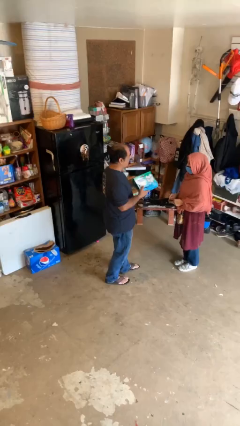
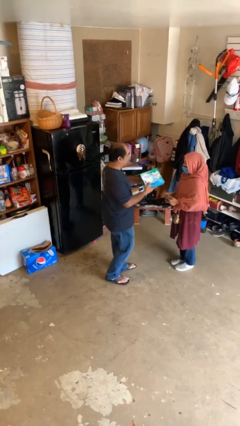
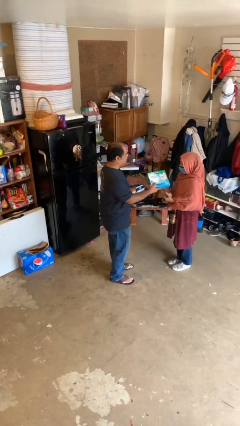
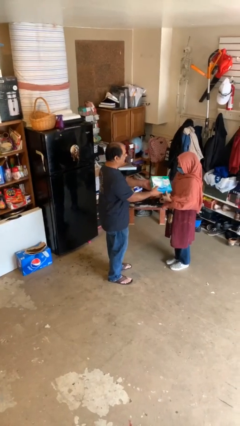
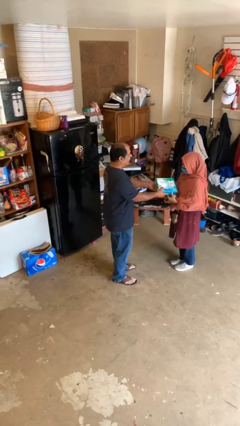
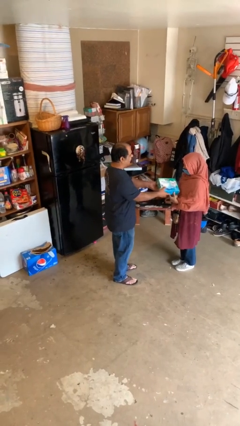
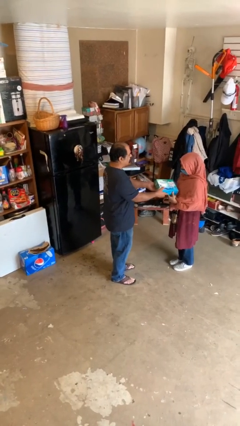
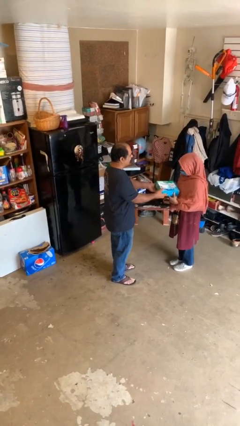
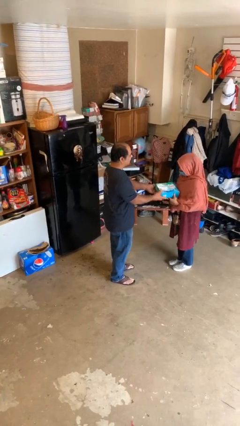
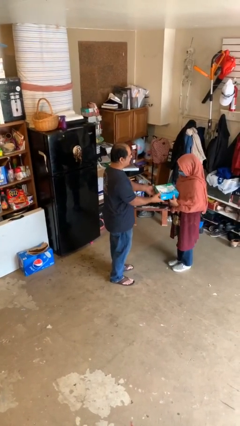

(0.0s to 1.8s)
person transfers object to person

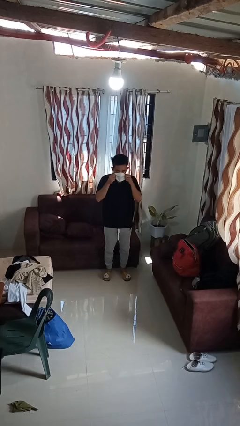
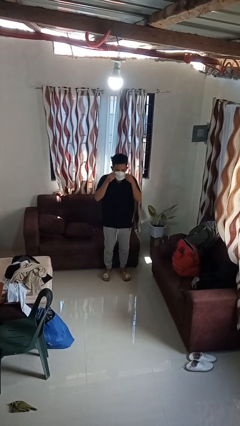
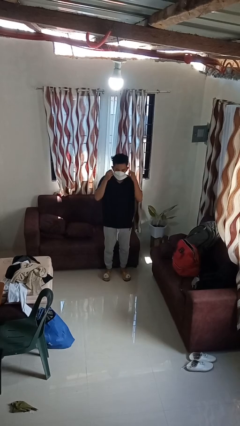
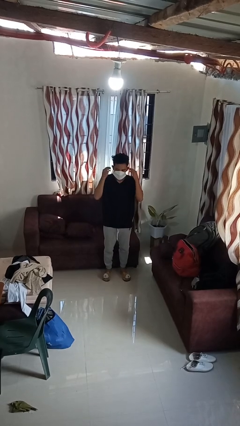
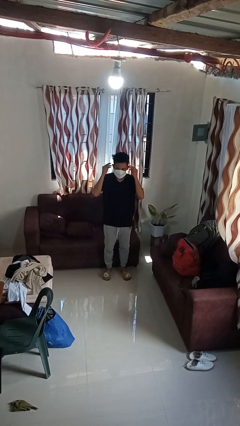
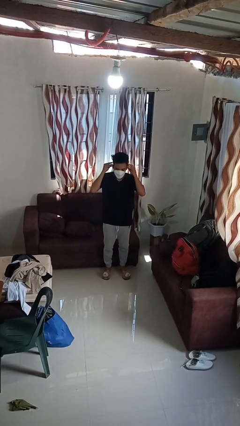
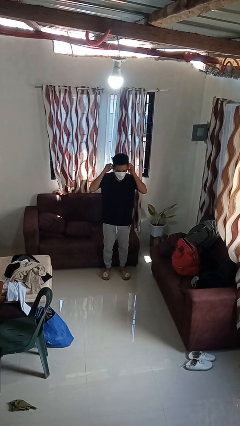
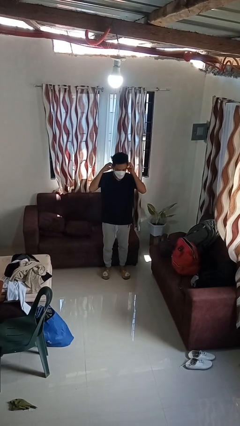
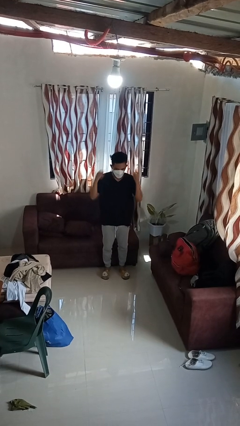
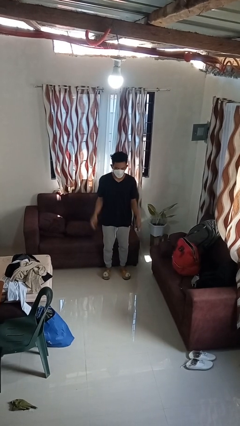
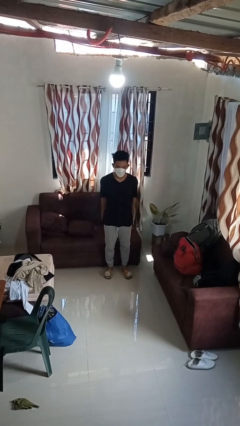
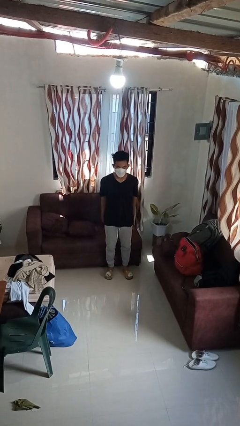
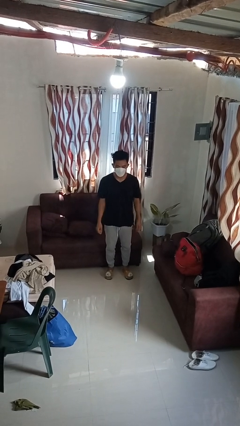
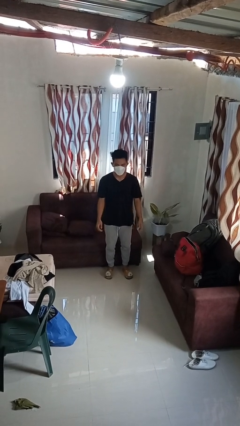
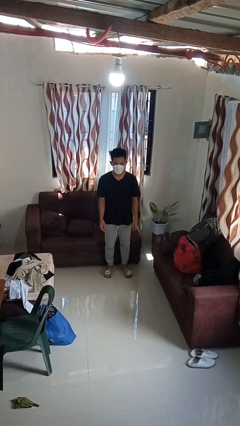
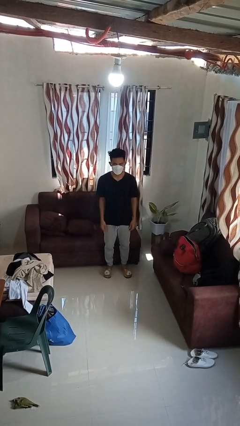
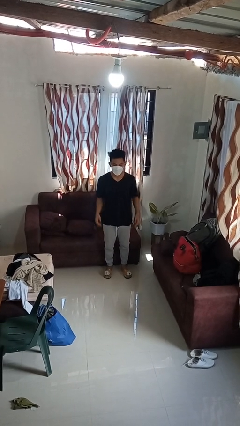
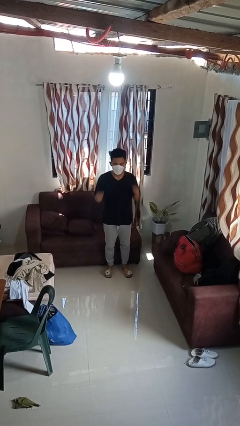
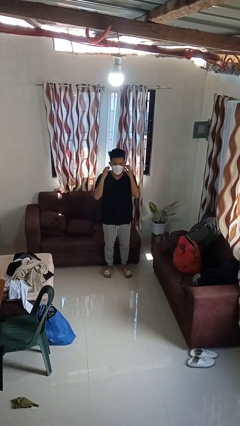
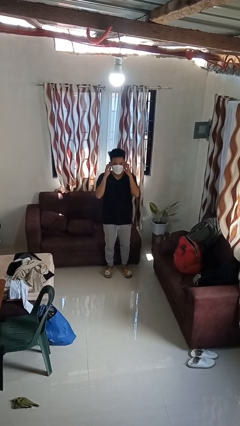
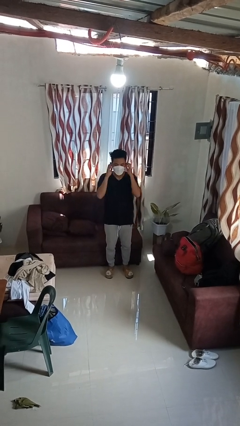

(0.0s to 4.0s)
person puts on facemask

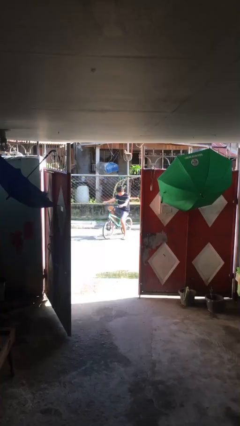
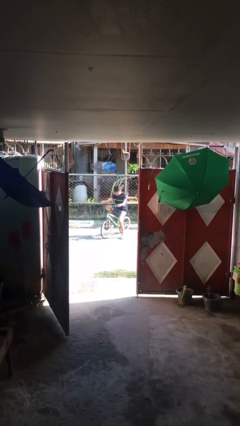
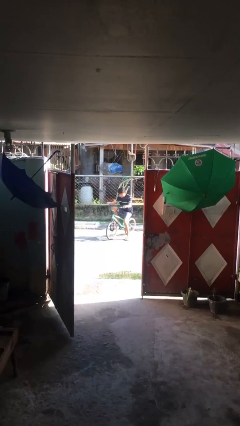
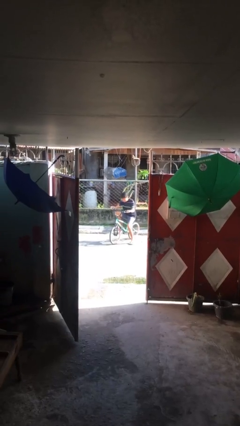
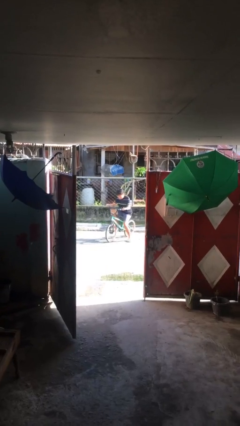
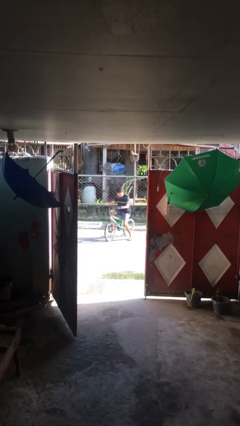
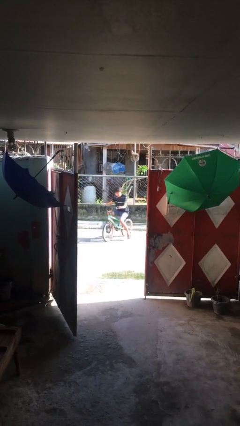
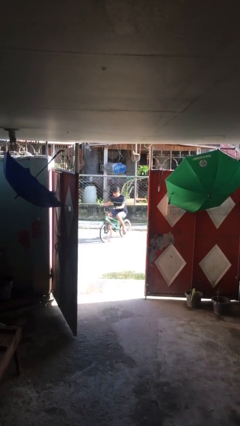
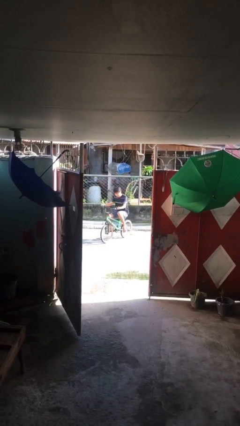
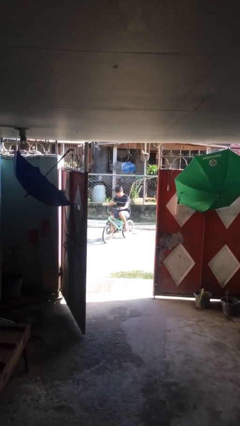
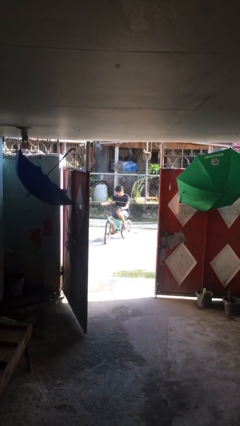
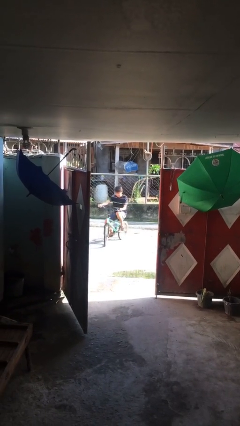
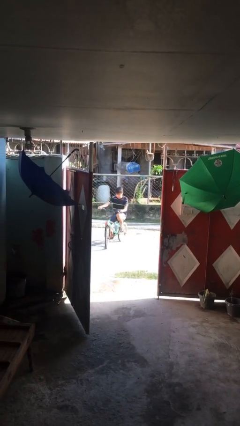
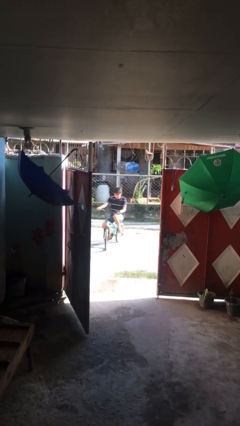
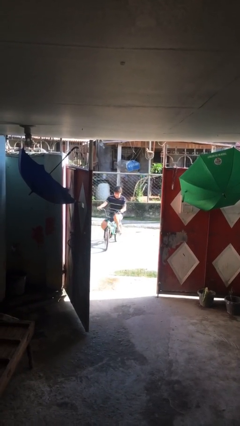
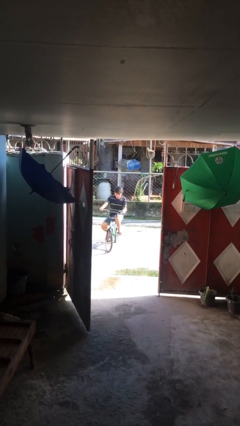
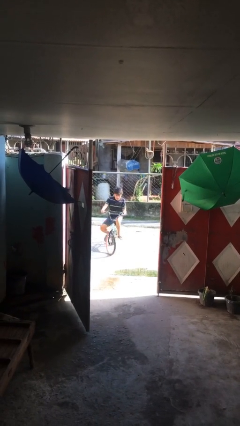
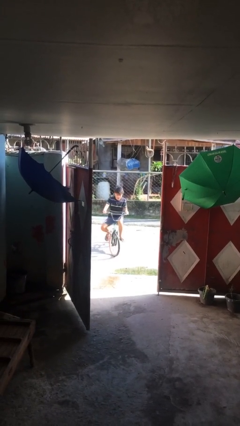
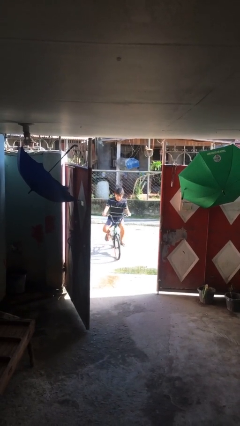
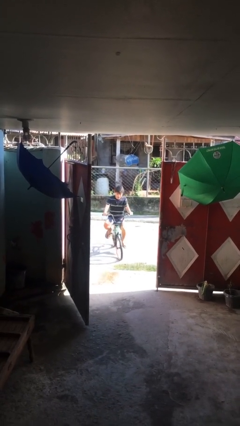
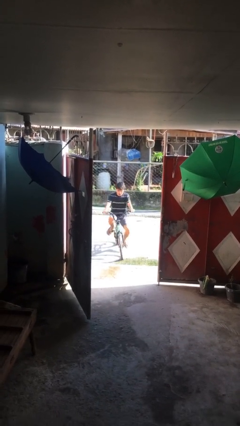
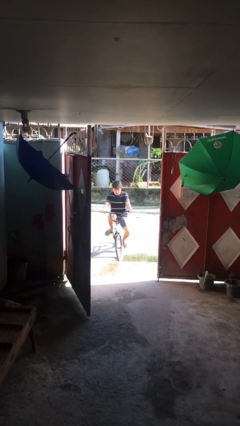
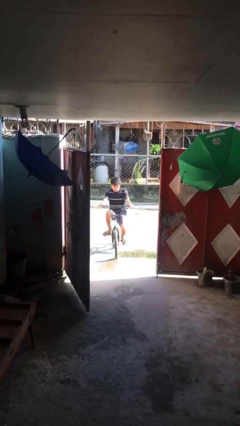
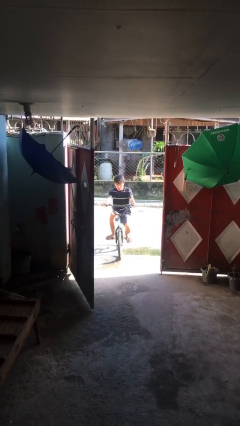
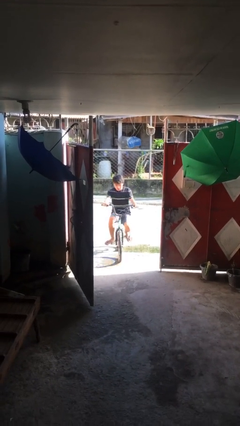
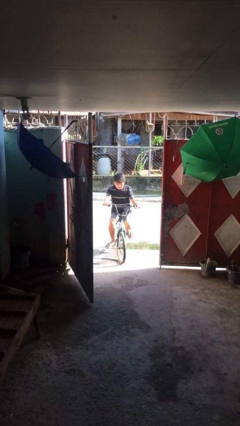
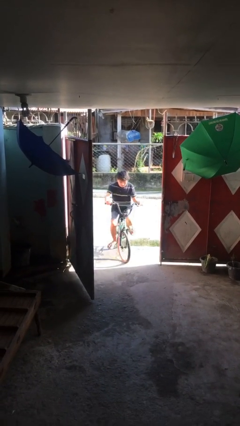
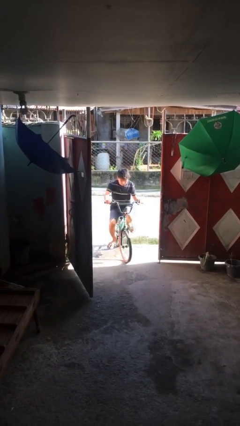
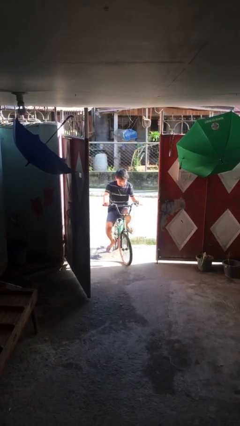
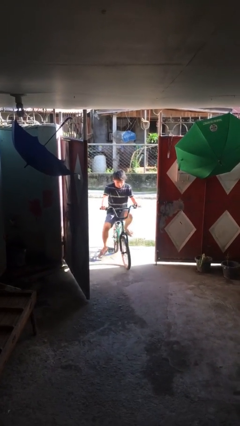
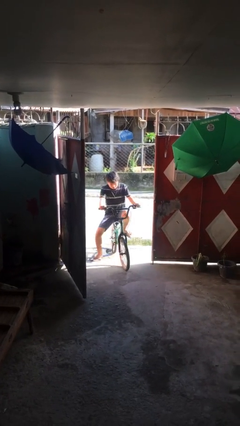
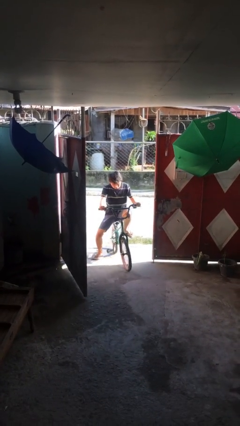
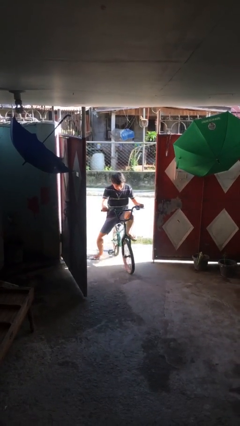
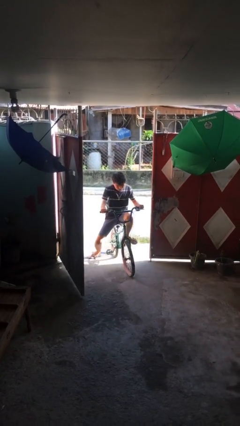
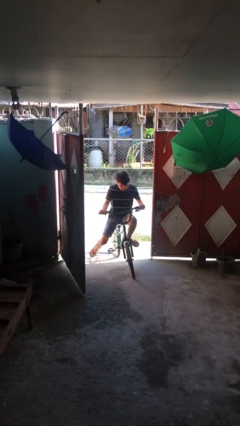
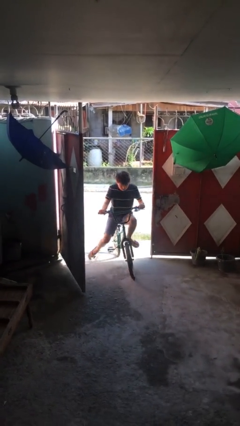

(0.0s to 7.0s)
person rides bicycle

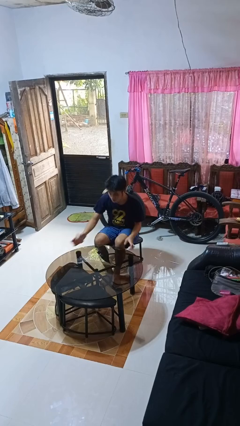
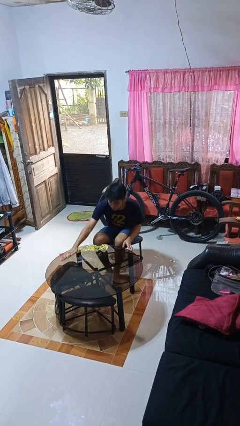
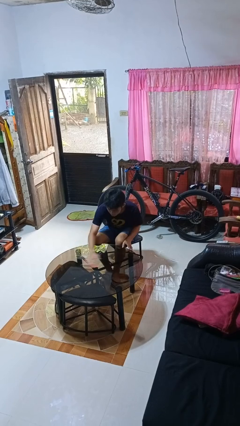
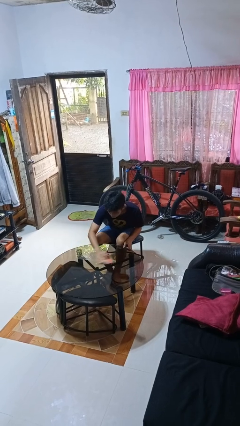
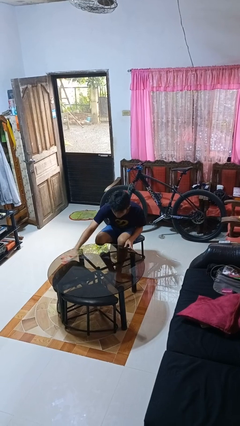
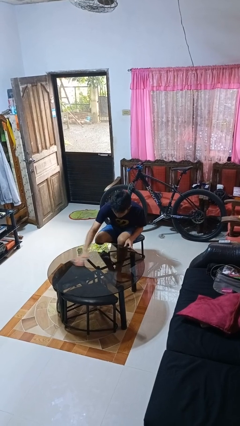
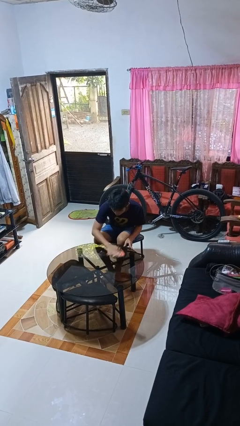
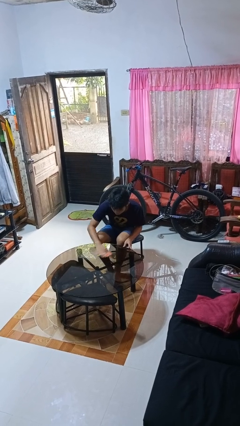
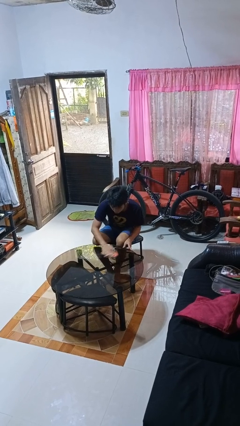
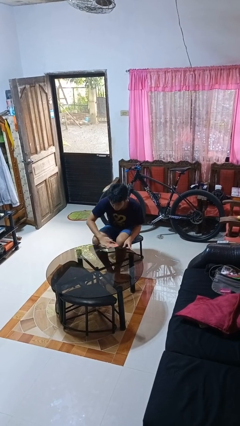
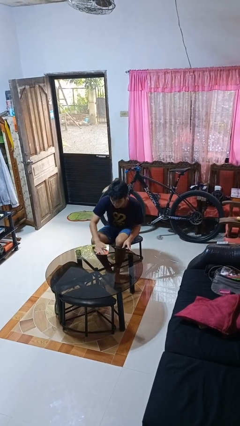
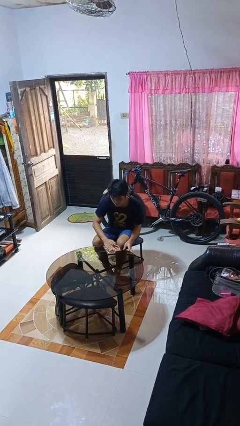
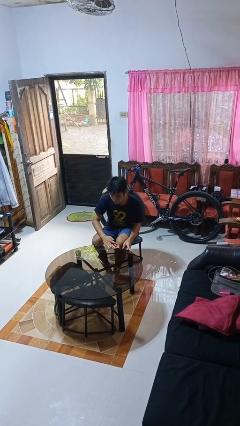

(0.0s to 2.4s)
person cleans table with rag

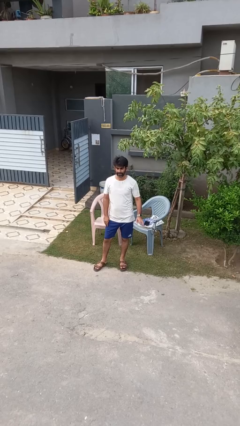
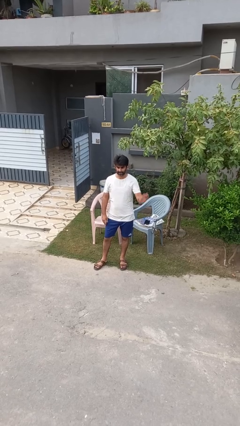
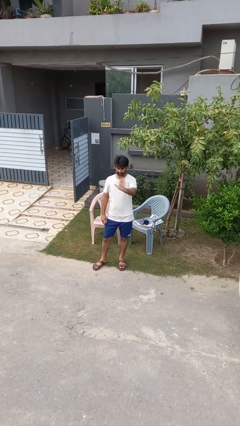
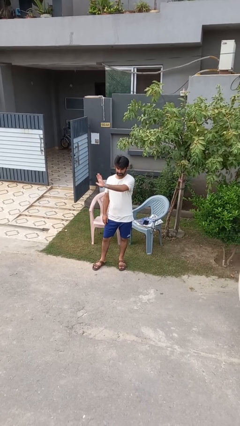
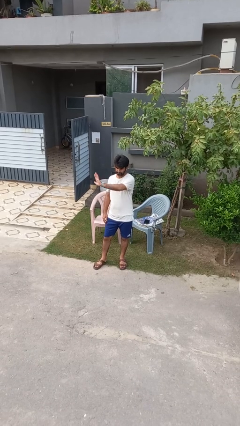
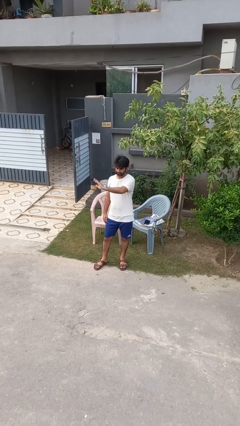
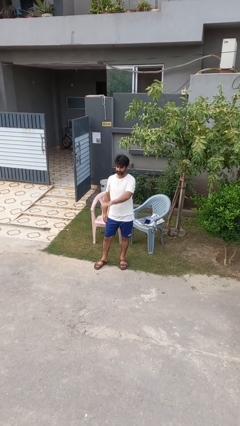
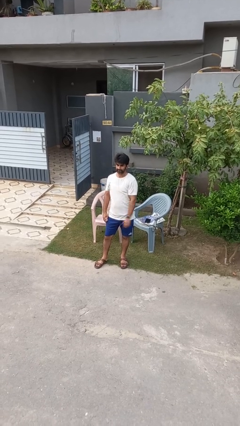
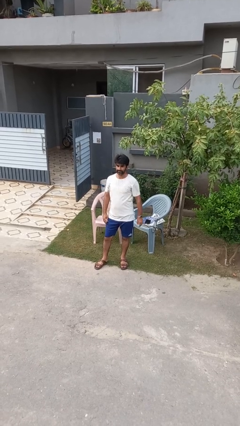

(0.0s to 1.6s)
person gestures swipe right

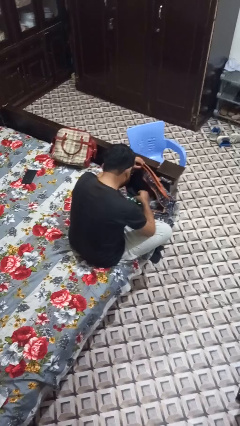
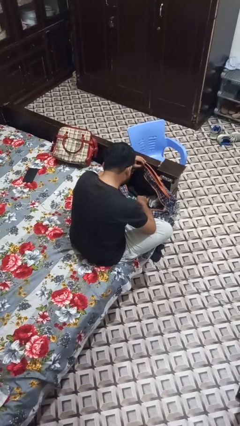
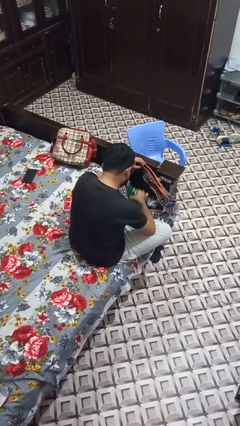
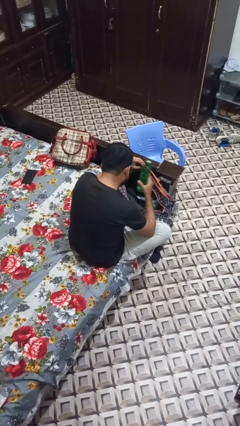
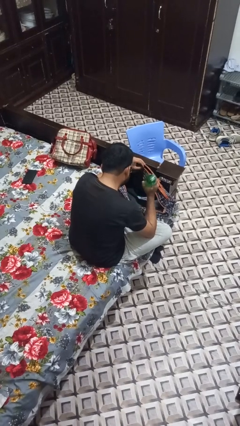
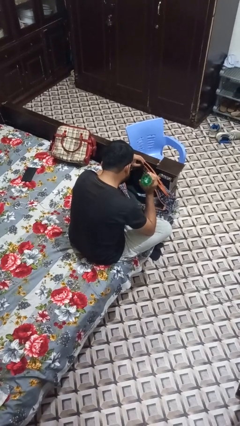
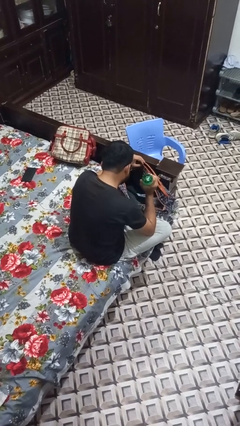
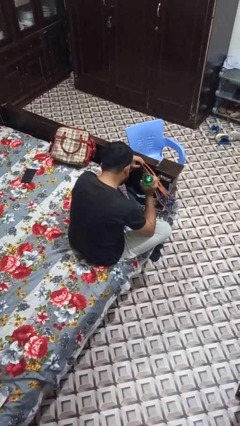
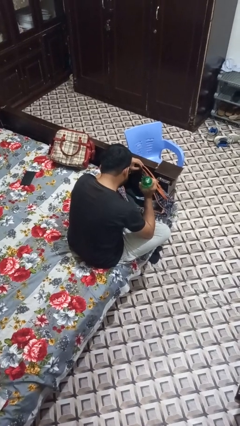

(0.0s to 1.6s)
person takes object from backpack
